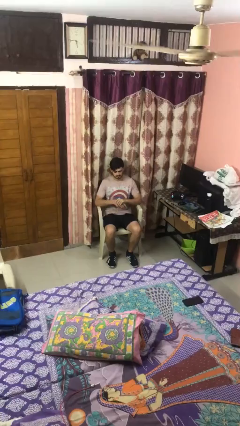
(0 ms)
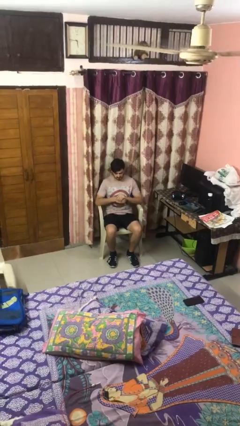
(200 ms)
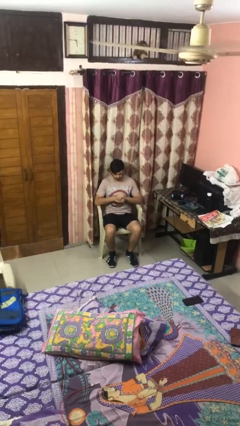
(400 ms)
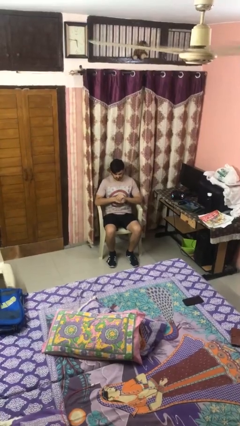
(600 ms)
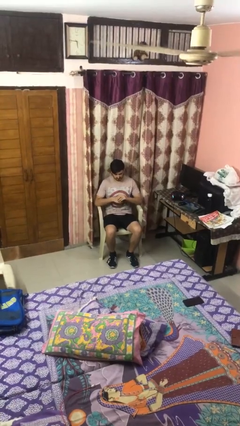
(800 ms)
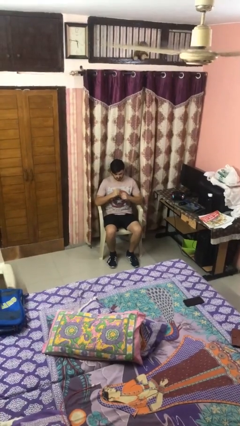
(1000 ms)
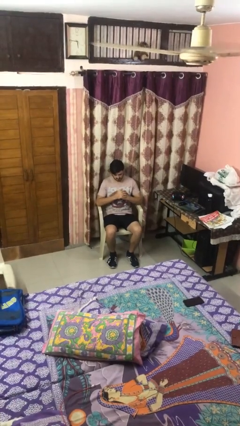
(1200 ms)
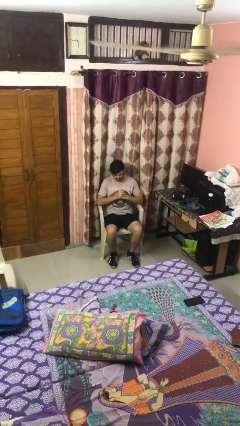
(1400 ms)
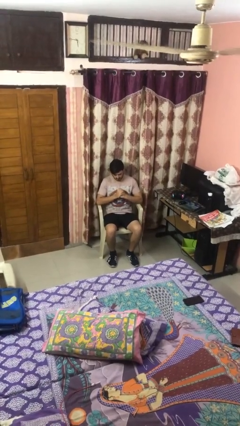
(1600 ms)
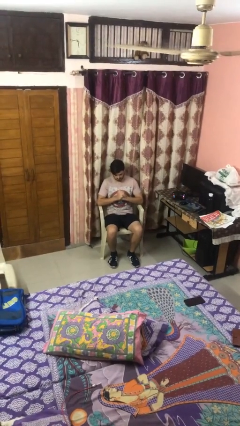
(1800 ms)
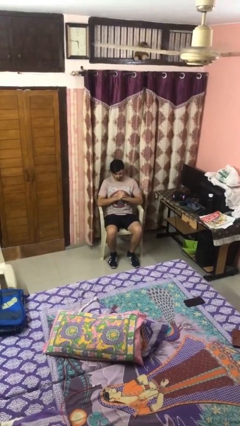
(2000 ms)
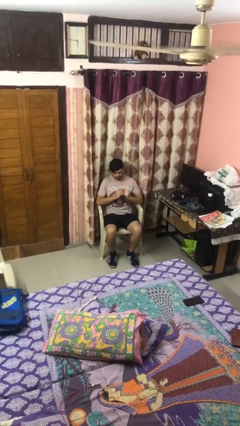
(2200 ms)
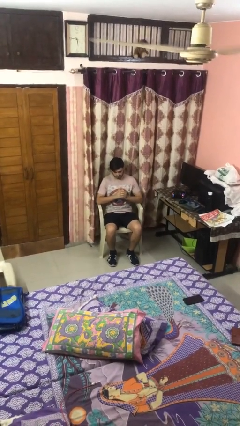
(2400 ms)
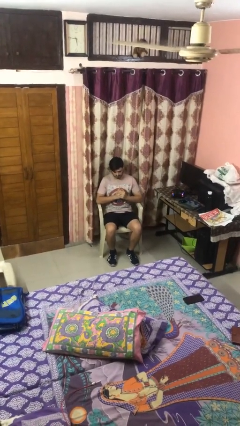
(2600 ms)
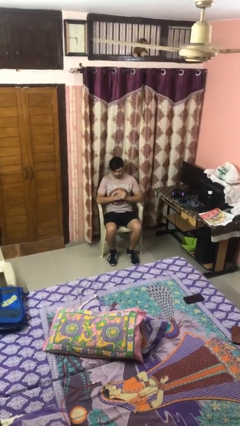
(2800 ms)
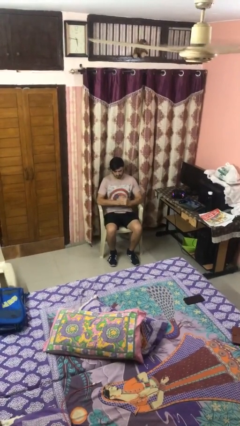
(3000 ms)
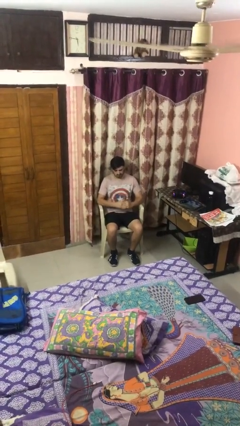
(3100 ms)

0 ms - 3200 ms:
person cracks knuckles

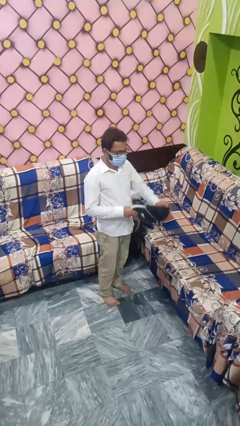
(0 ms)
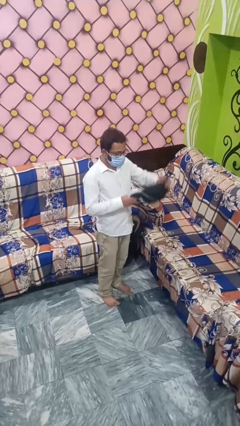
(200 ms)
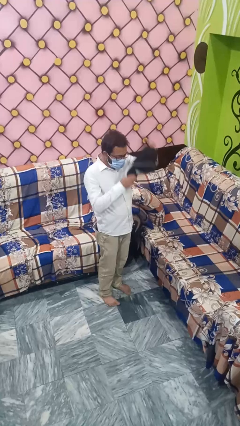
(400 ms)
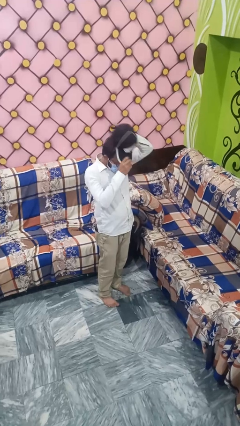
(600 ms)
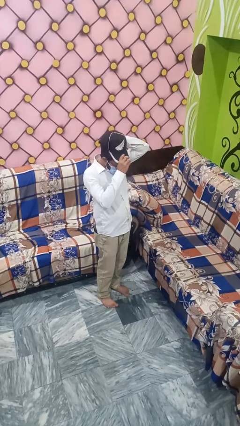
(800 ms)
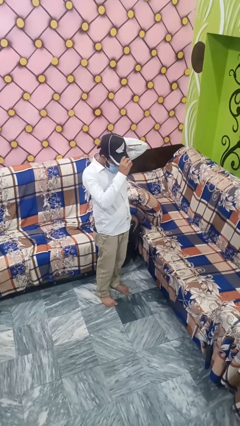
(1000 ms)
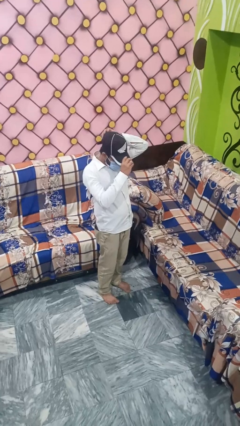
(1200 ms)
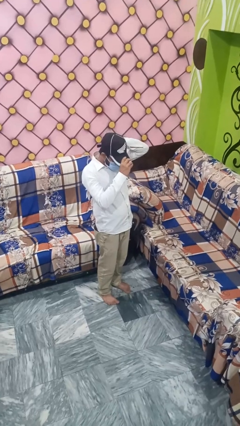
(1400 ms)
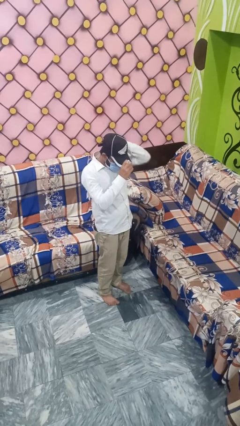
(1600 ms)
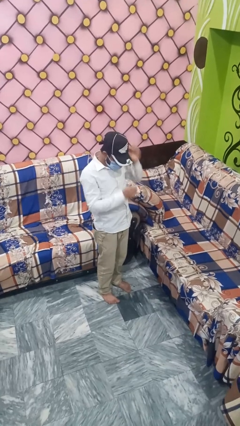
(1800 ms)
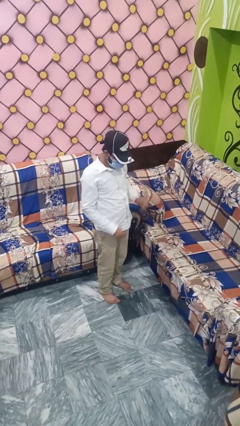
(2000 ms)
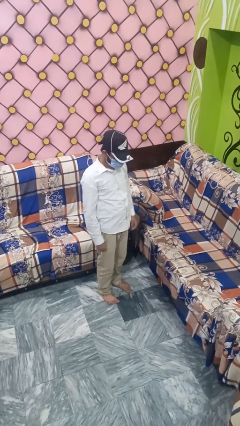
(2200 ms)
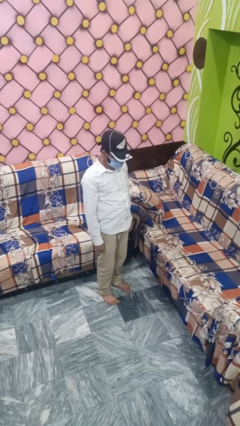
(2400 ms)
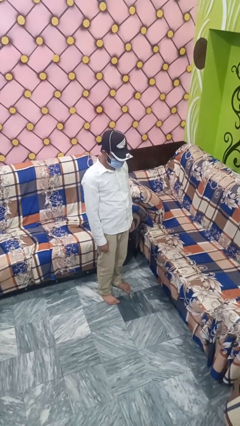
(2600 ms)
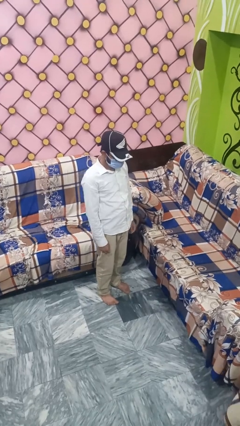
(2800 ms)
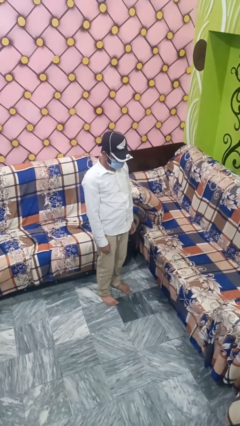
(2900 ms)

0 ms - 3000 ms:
person puts on hat

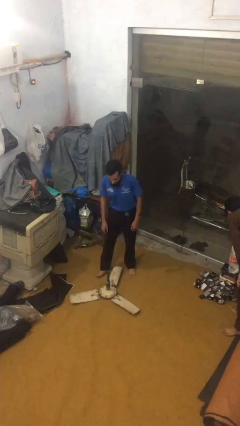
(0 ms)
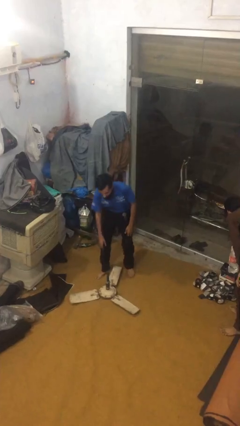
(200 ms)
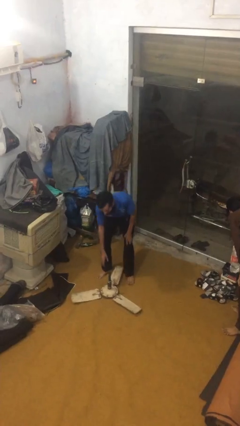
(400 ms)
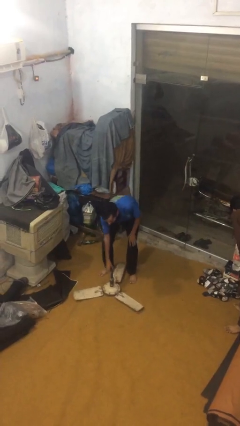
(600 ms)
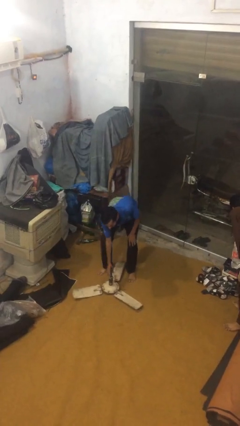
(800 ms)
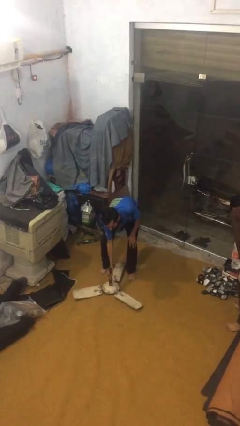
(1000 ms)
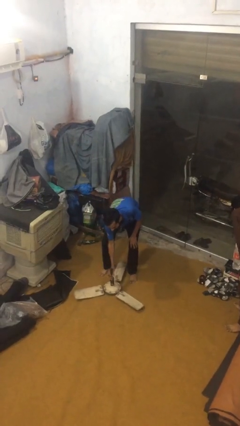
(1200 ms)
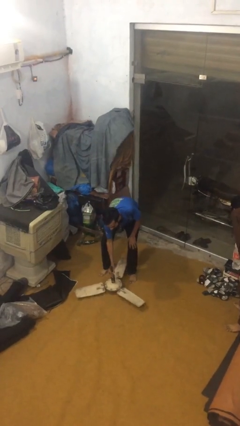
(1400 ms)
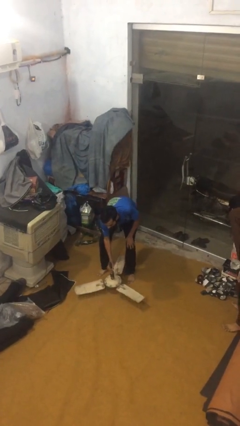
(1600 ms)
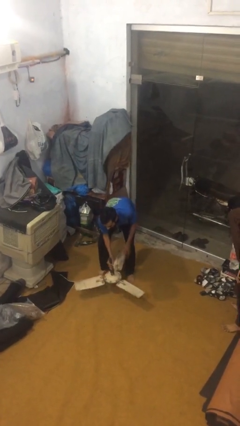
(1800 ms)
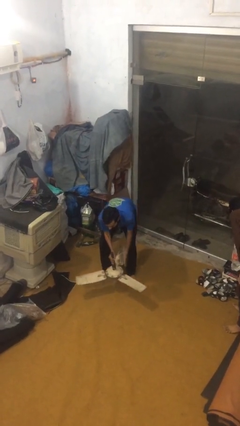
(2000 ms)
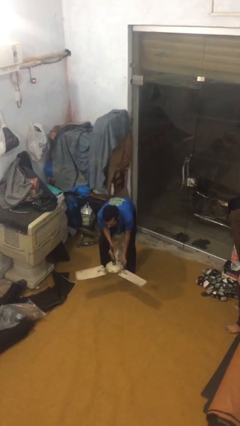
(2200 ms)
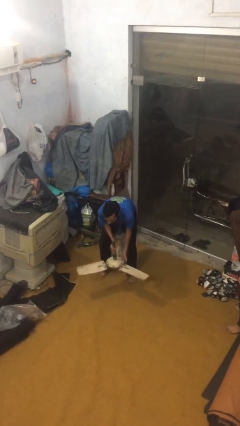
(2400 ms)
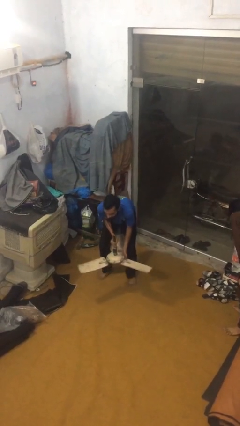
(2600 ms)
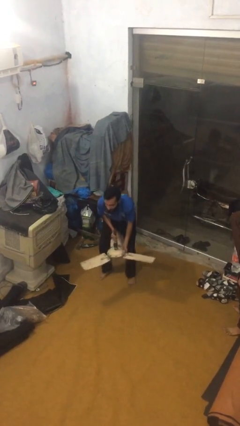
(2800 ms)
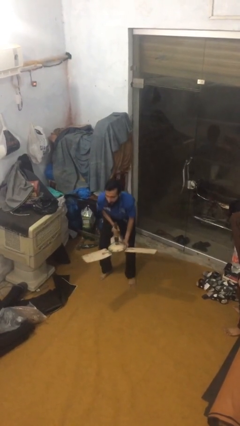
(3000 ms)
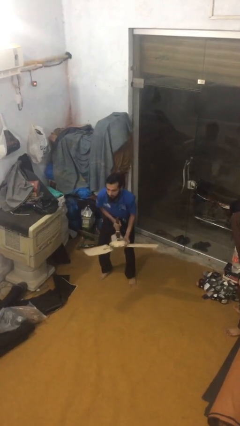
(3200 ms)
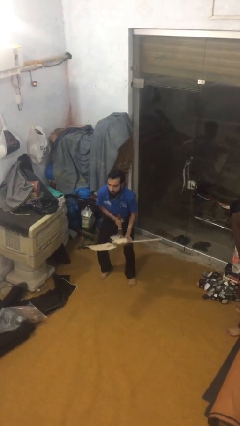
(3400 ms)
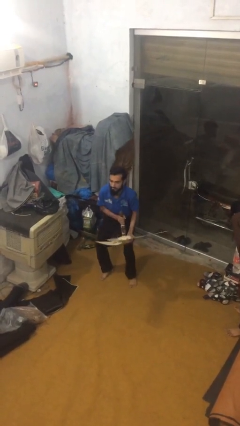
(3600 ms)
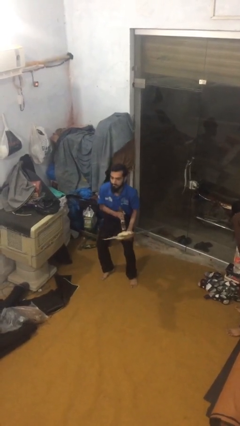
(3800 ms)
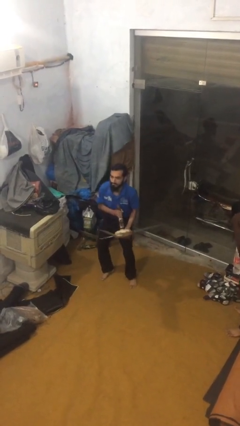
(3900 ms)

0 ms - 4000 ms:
person picks up object from floor

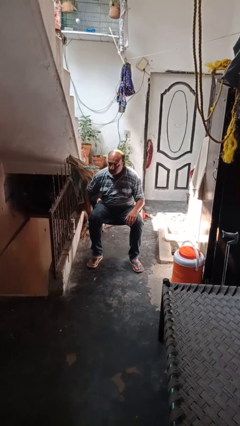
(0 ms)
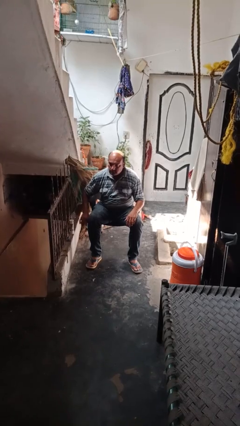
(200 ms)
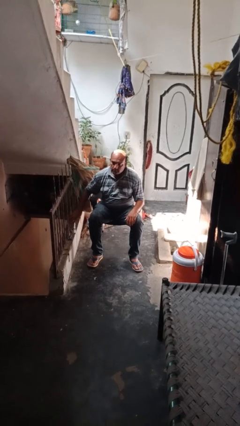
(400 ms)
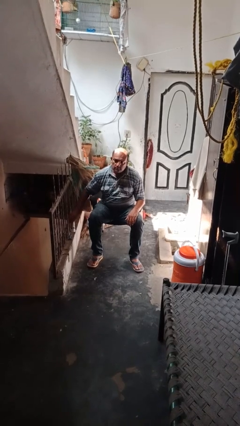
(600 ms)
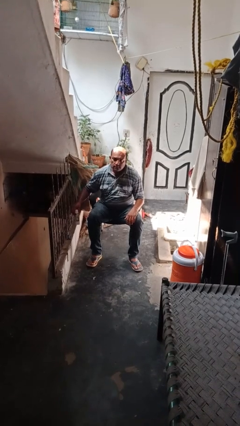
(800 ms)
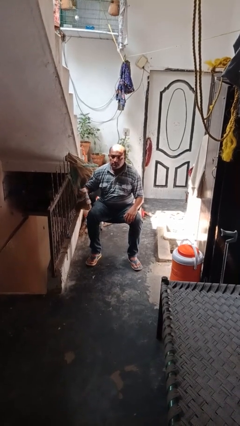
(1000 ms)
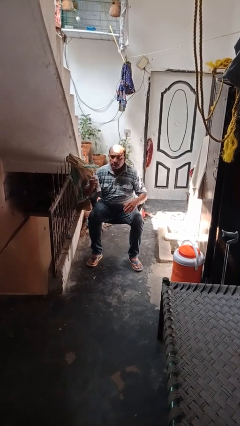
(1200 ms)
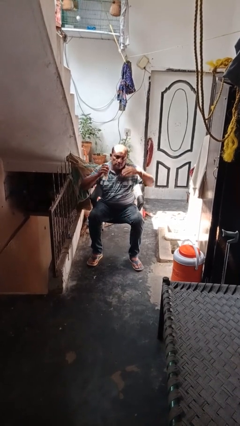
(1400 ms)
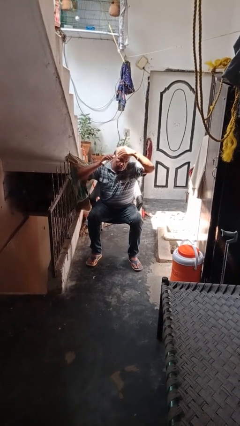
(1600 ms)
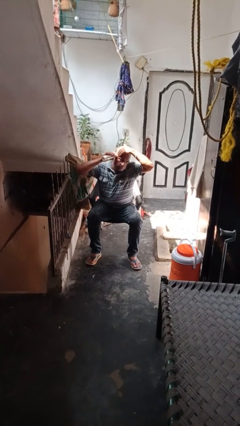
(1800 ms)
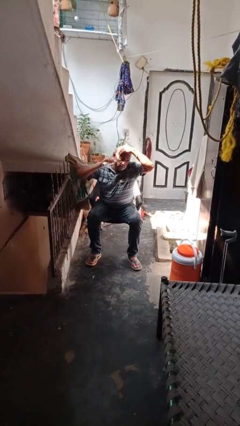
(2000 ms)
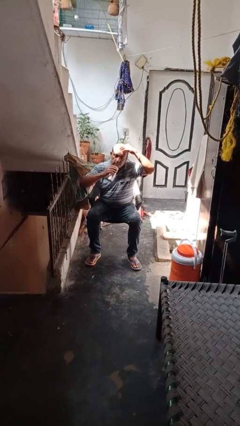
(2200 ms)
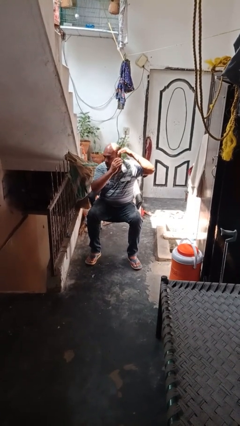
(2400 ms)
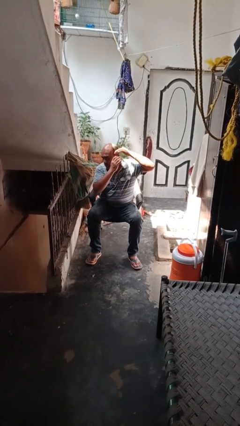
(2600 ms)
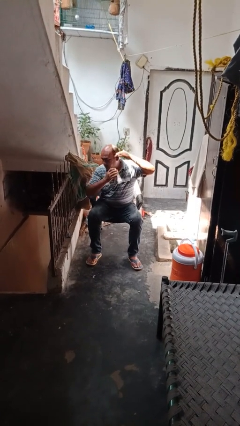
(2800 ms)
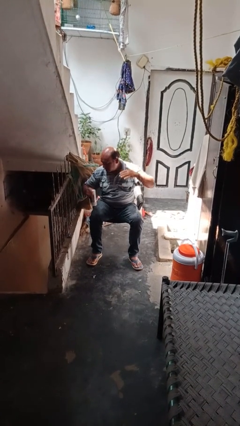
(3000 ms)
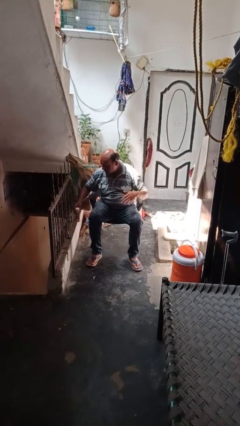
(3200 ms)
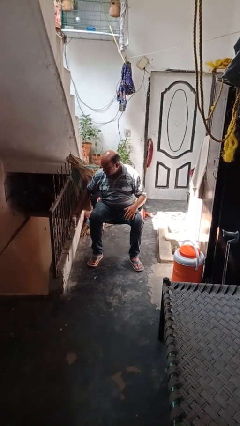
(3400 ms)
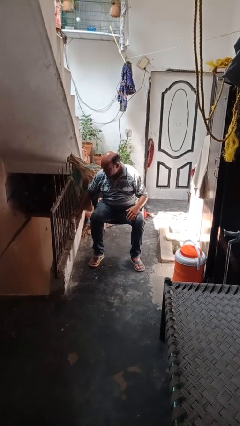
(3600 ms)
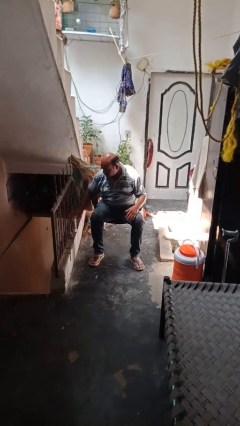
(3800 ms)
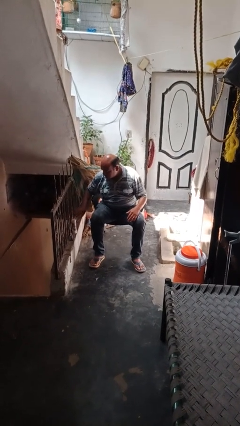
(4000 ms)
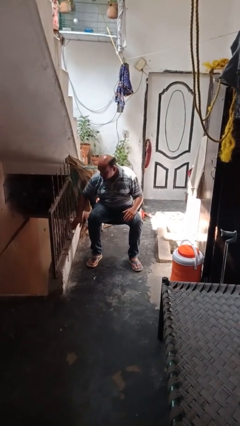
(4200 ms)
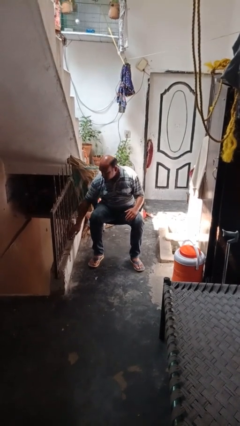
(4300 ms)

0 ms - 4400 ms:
person applies shaving cream

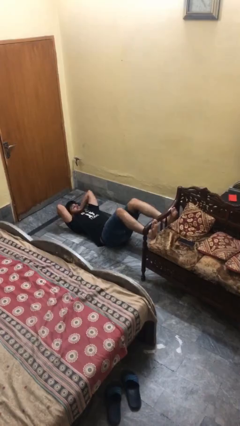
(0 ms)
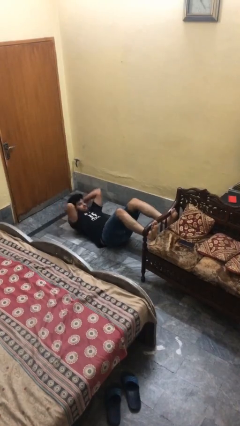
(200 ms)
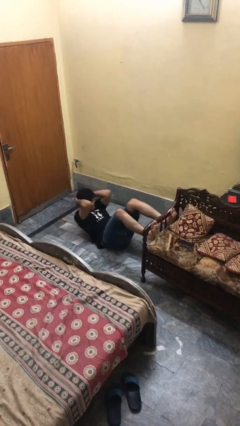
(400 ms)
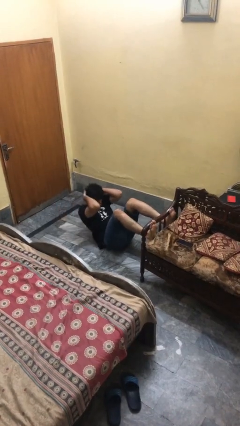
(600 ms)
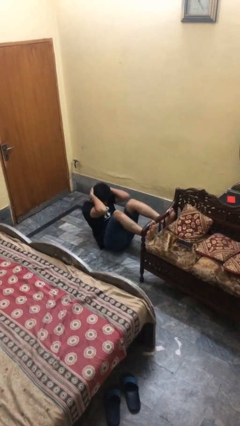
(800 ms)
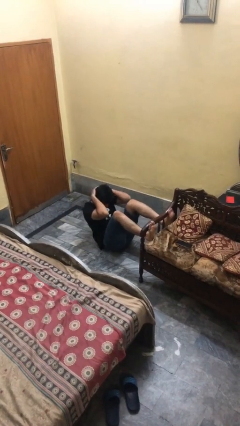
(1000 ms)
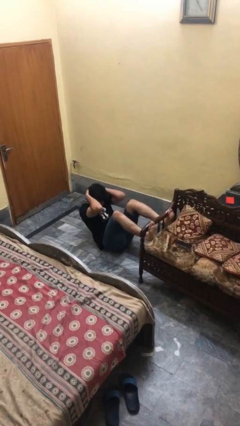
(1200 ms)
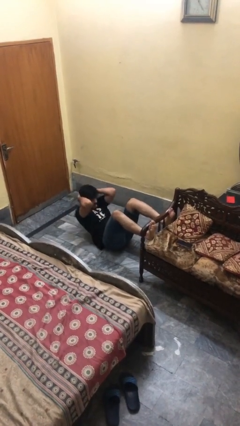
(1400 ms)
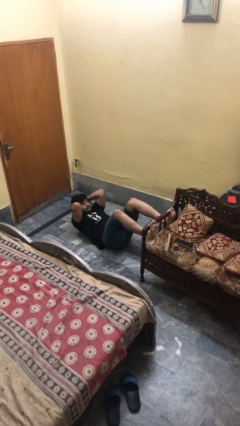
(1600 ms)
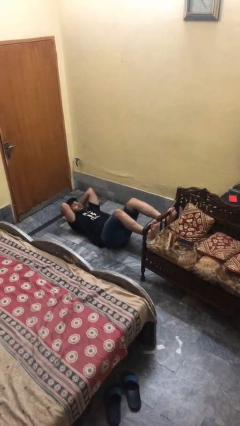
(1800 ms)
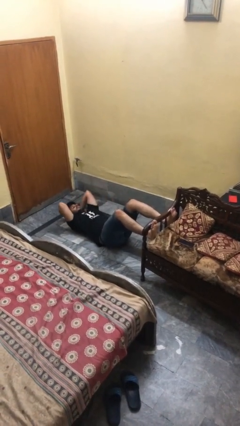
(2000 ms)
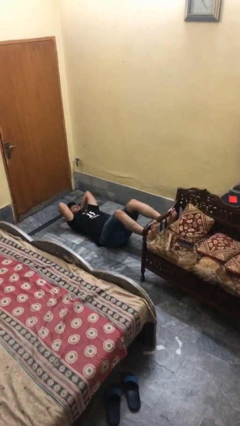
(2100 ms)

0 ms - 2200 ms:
person exercises with situp

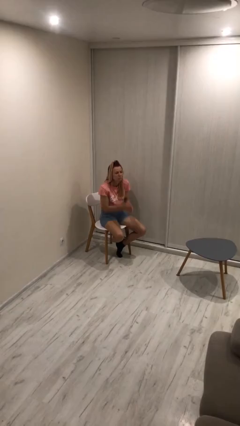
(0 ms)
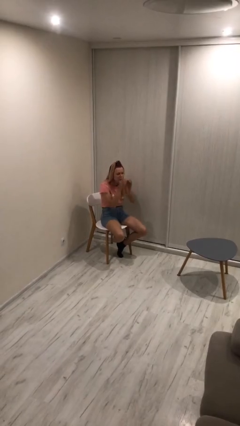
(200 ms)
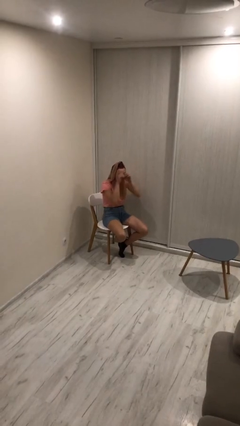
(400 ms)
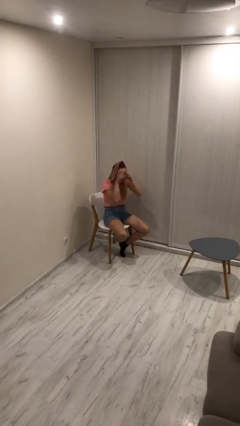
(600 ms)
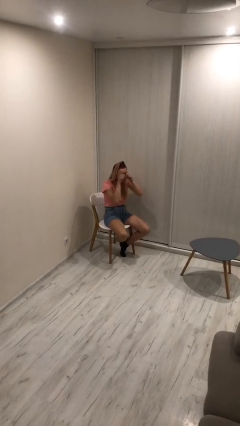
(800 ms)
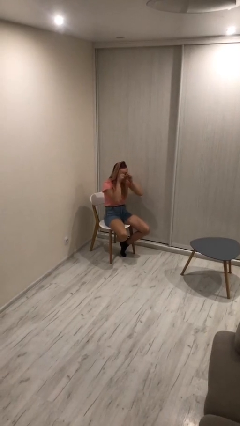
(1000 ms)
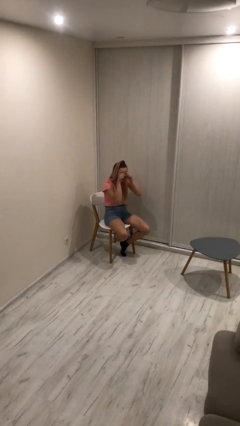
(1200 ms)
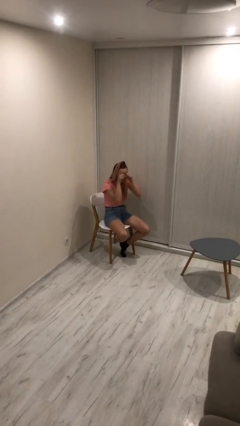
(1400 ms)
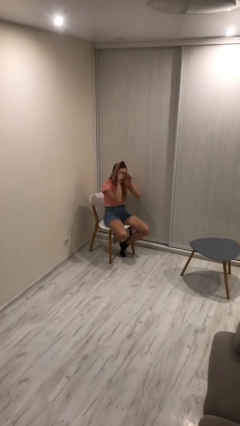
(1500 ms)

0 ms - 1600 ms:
person rubs eyes
